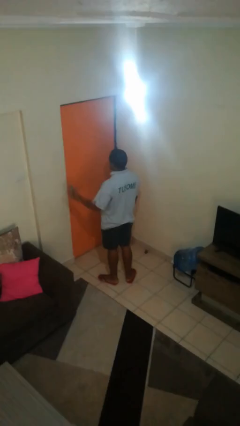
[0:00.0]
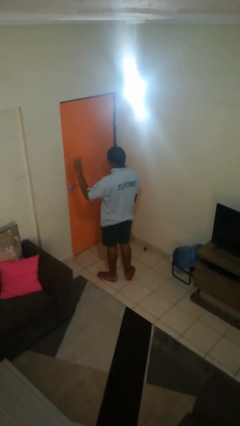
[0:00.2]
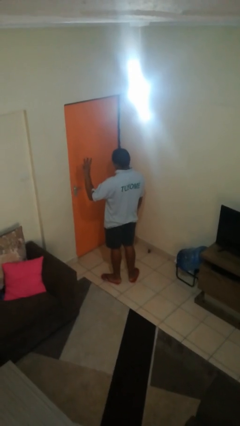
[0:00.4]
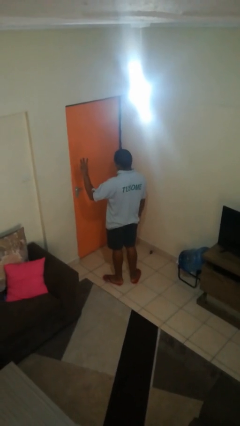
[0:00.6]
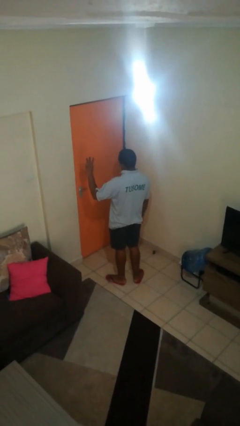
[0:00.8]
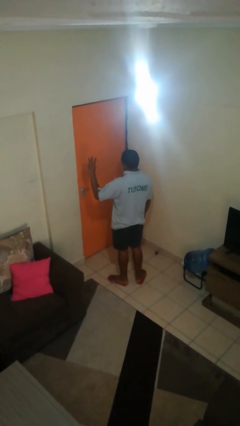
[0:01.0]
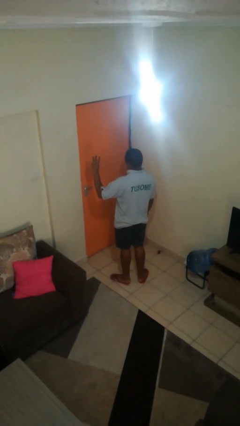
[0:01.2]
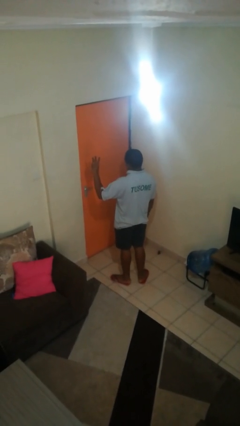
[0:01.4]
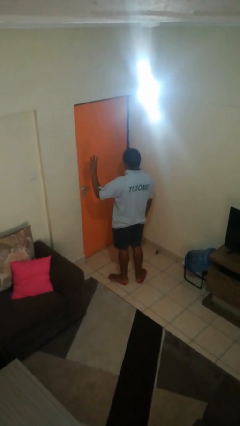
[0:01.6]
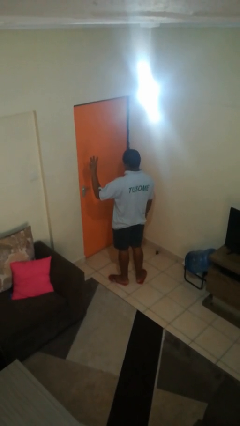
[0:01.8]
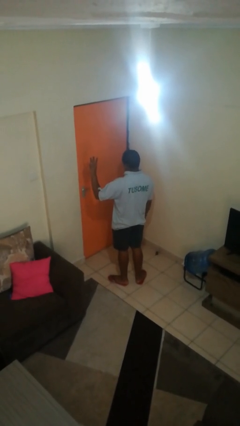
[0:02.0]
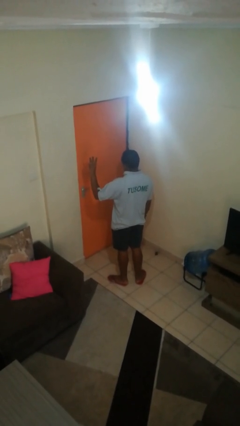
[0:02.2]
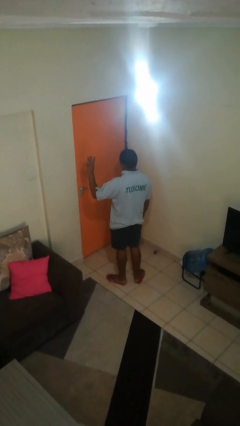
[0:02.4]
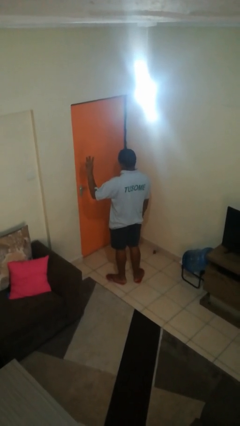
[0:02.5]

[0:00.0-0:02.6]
person gestures number three

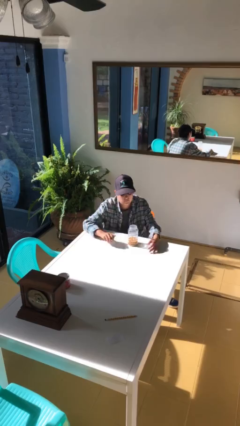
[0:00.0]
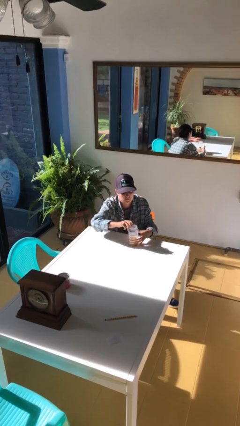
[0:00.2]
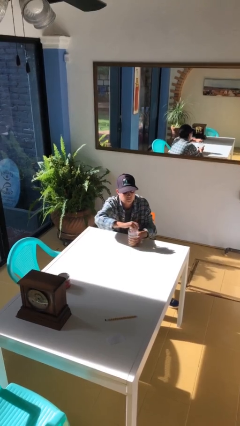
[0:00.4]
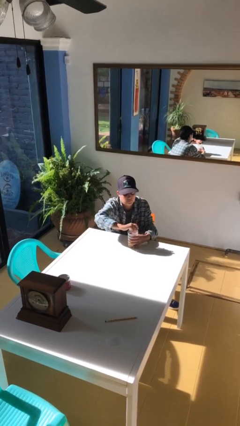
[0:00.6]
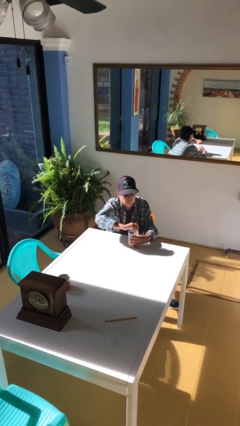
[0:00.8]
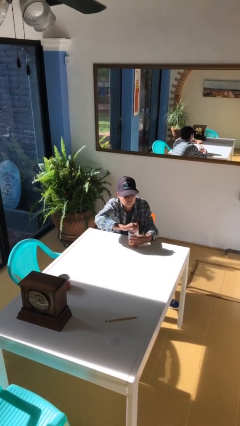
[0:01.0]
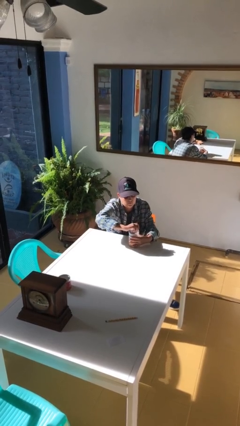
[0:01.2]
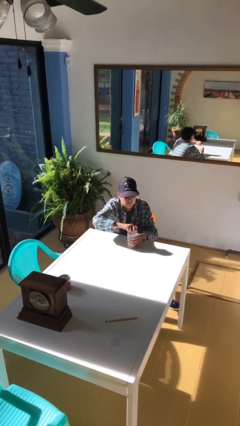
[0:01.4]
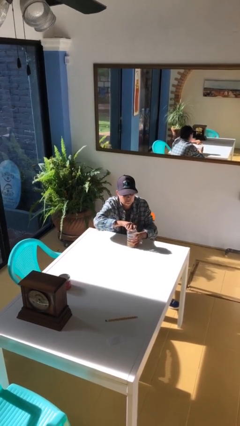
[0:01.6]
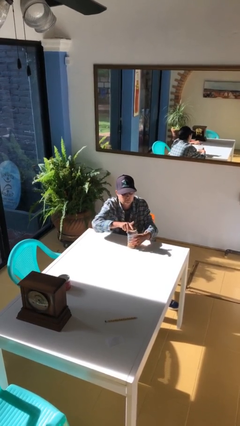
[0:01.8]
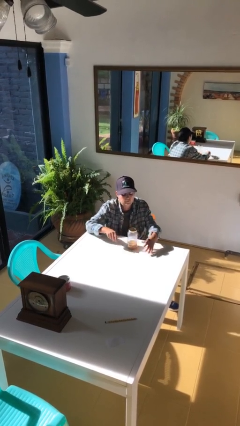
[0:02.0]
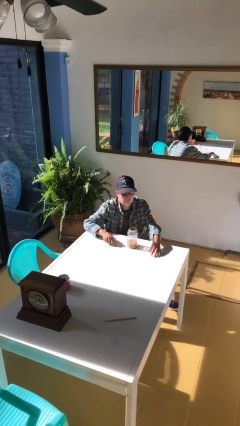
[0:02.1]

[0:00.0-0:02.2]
person closes jar

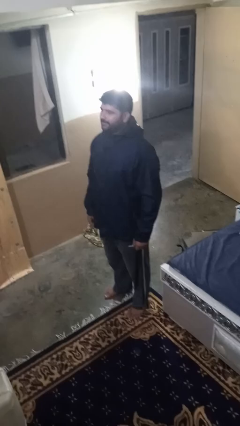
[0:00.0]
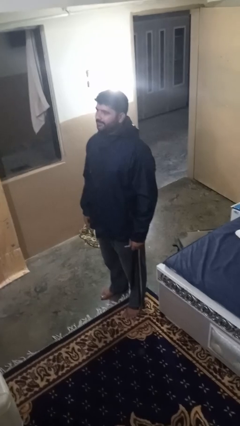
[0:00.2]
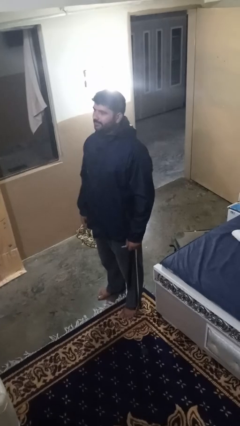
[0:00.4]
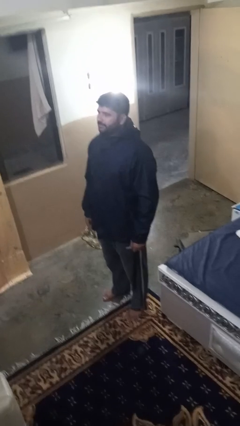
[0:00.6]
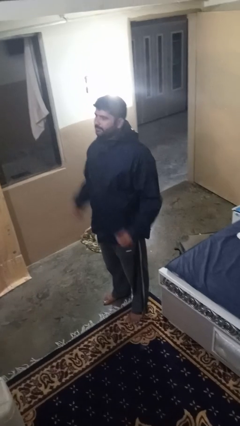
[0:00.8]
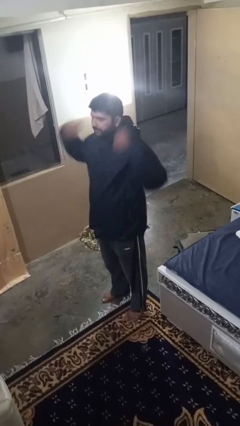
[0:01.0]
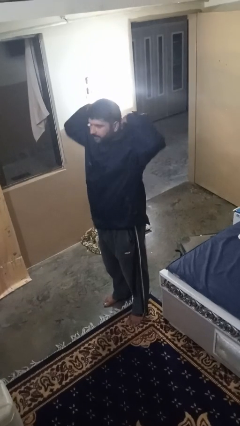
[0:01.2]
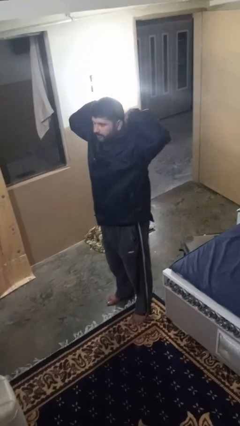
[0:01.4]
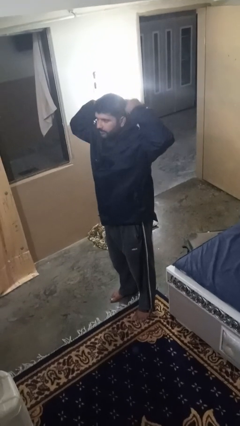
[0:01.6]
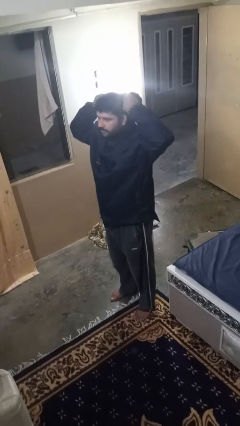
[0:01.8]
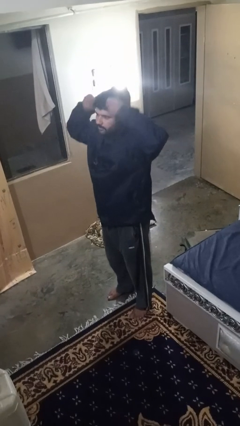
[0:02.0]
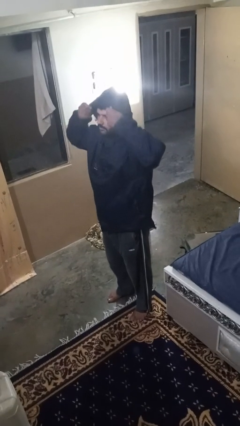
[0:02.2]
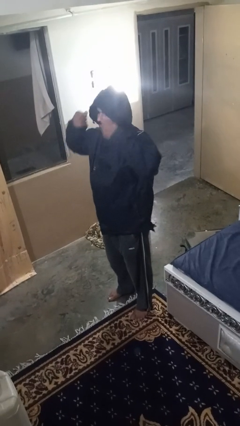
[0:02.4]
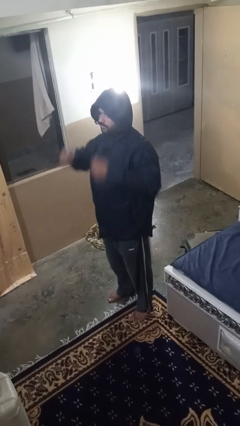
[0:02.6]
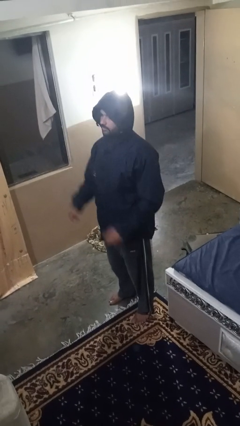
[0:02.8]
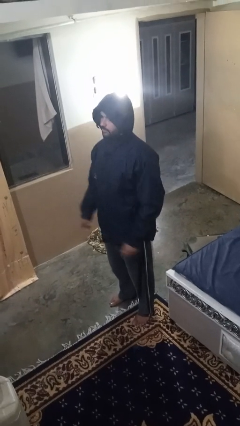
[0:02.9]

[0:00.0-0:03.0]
person puts on hoodie

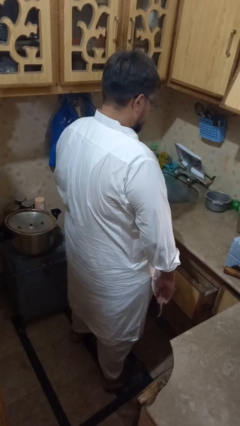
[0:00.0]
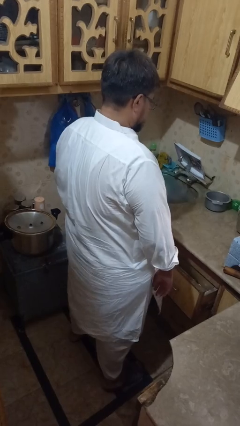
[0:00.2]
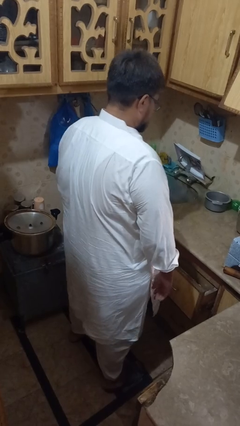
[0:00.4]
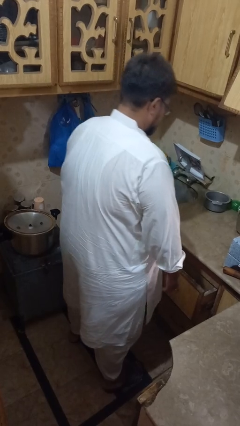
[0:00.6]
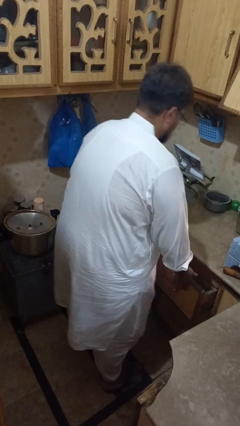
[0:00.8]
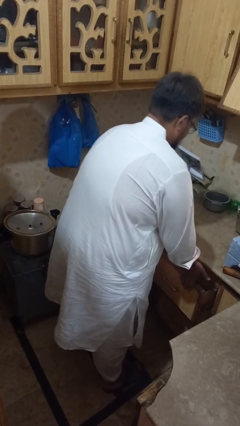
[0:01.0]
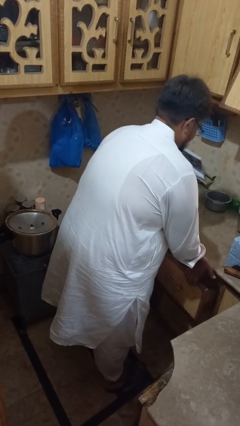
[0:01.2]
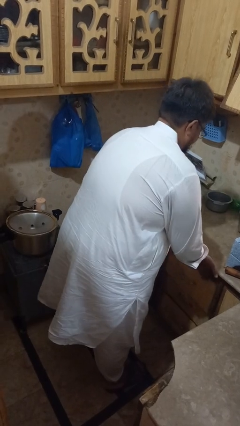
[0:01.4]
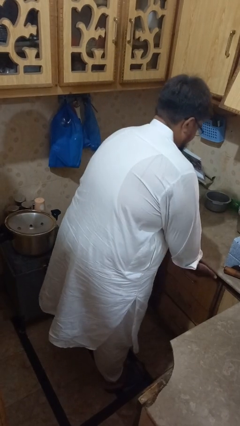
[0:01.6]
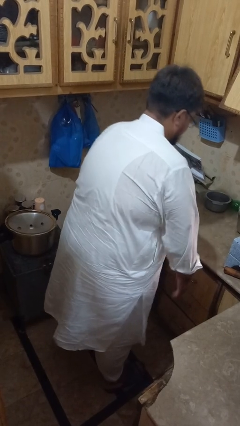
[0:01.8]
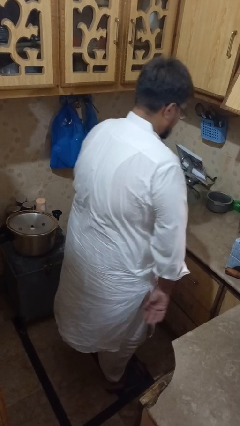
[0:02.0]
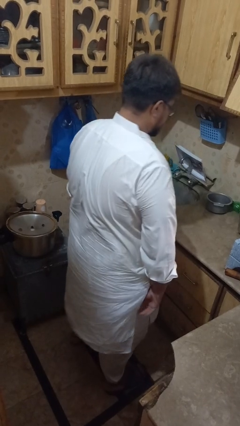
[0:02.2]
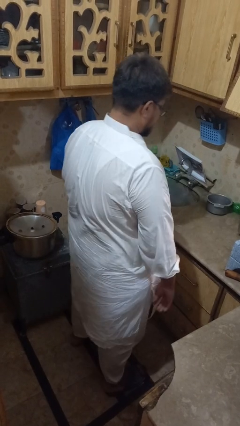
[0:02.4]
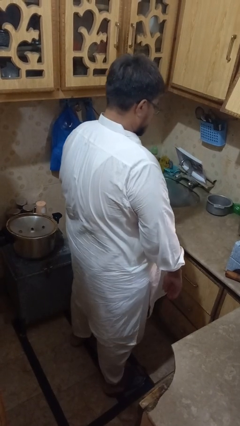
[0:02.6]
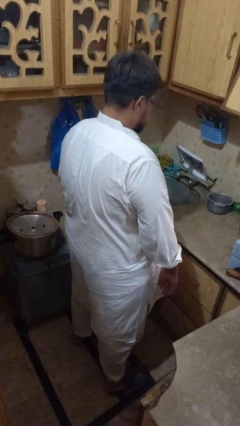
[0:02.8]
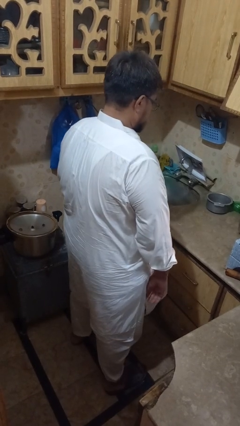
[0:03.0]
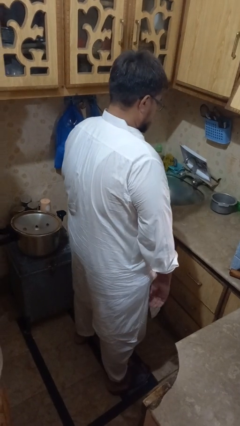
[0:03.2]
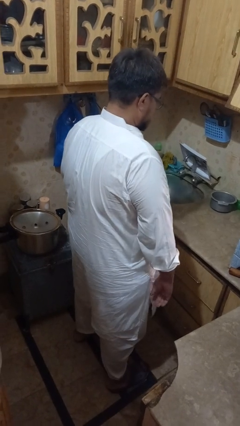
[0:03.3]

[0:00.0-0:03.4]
person closes kitchen drawer

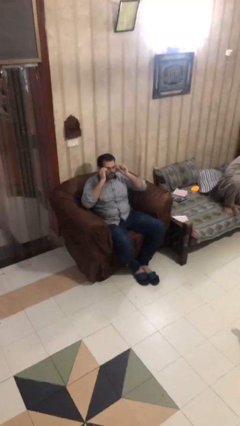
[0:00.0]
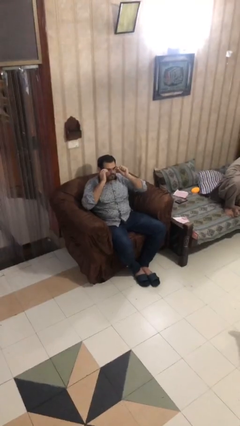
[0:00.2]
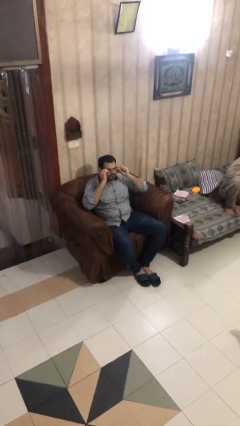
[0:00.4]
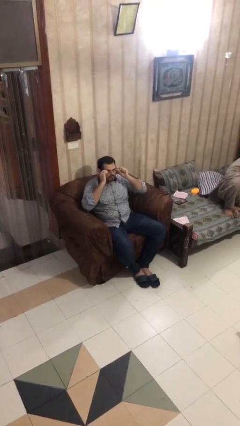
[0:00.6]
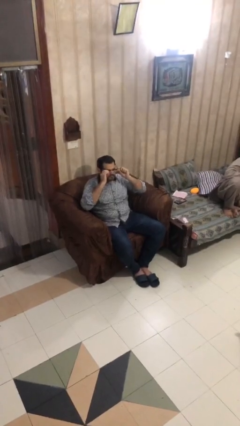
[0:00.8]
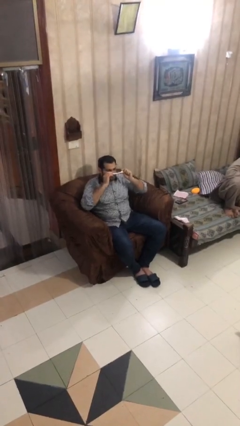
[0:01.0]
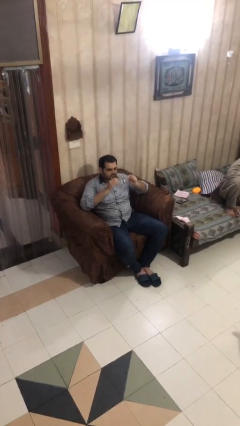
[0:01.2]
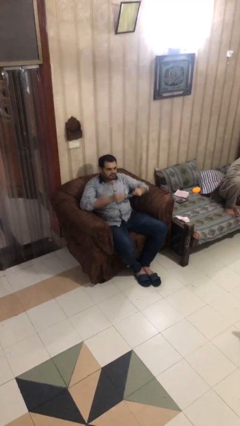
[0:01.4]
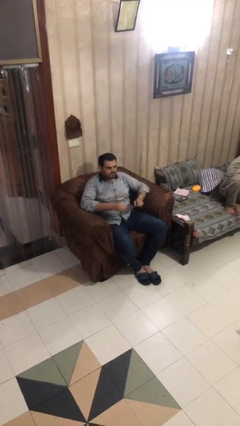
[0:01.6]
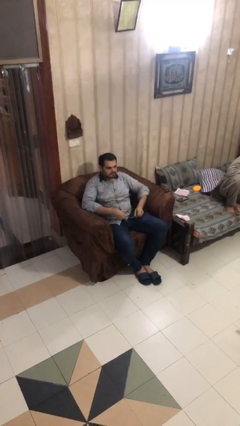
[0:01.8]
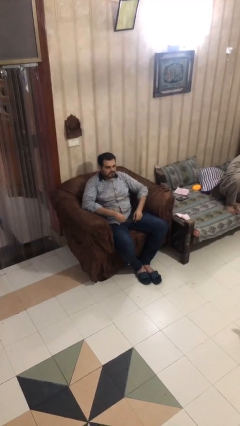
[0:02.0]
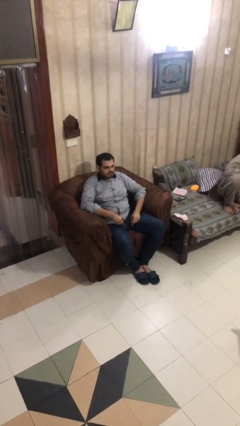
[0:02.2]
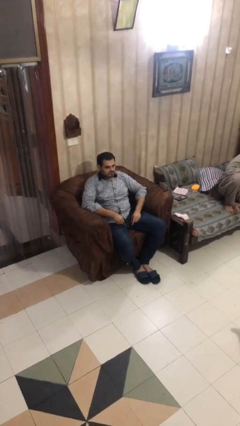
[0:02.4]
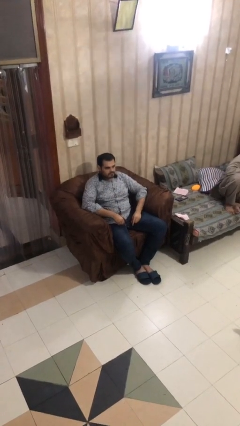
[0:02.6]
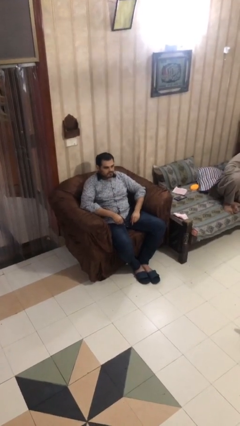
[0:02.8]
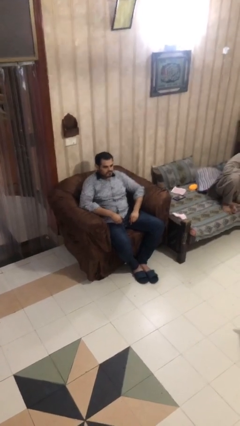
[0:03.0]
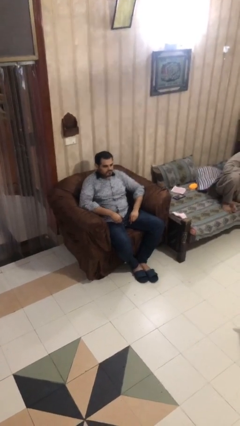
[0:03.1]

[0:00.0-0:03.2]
person takes off glasses

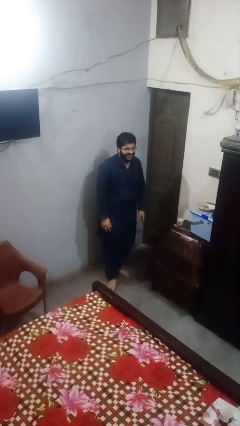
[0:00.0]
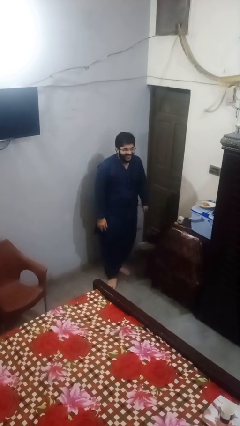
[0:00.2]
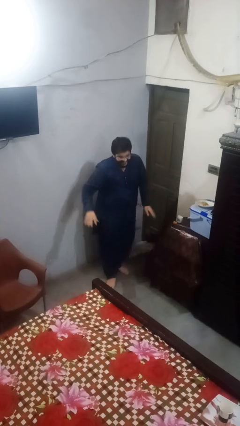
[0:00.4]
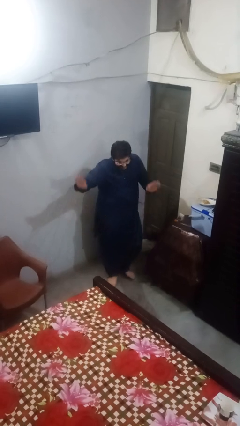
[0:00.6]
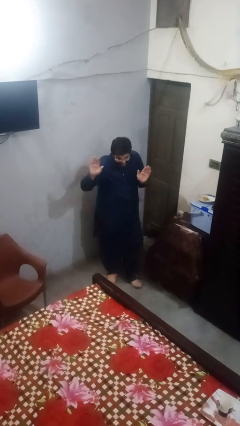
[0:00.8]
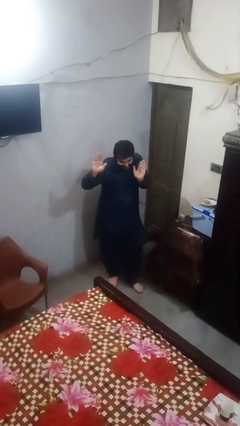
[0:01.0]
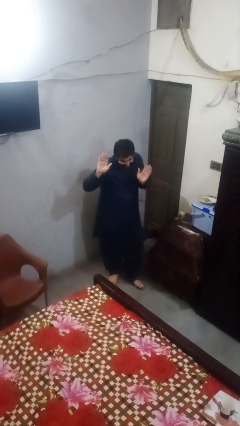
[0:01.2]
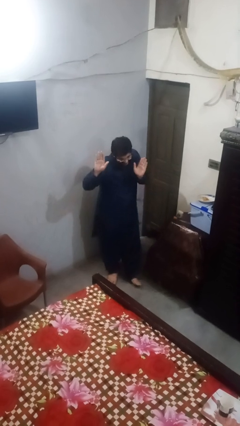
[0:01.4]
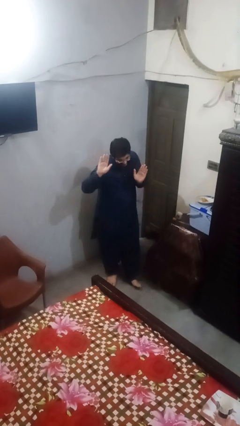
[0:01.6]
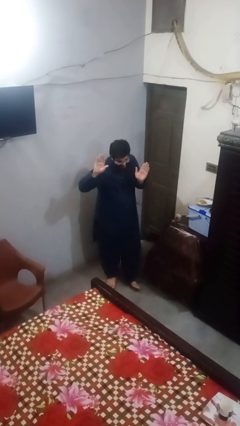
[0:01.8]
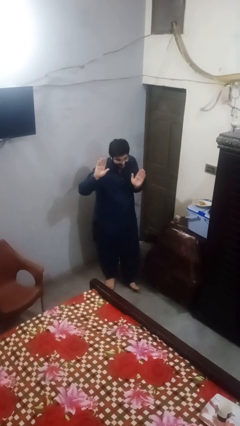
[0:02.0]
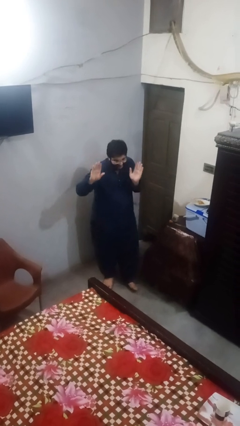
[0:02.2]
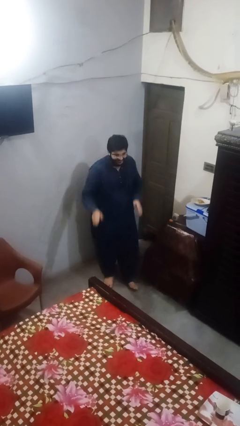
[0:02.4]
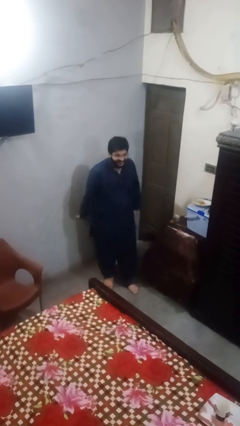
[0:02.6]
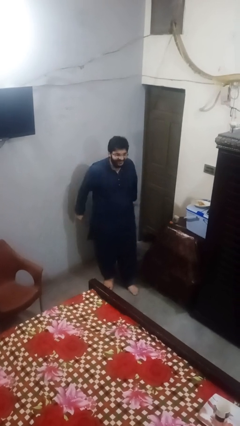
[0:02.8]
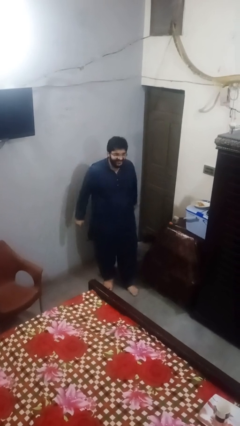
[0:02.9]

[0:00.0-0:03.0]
person dances in place
